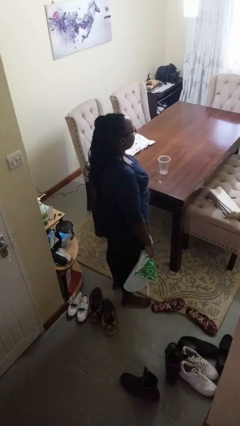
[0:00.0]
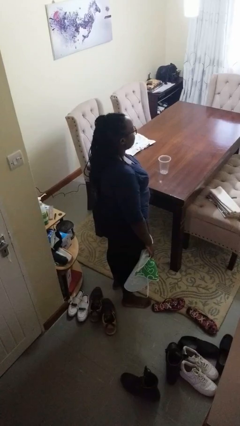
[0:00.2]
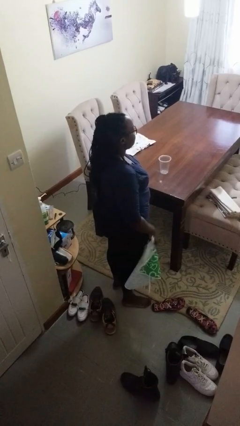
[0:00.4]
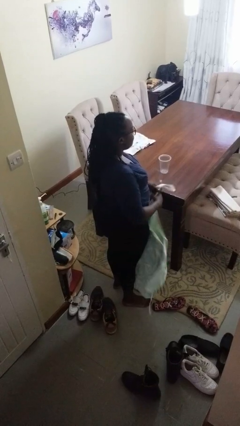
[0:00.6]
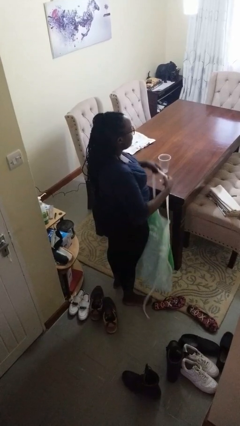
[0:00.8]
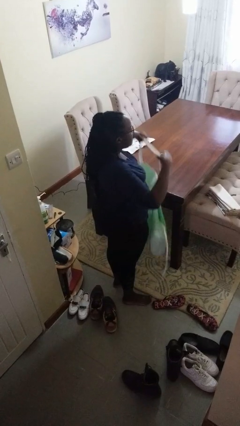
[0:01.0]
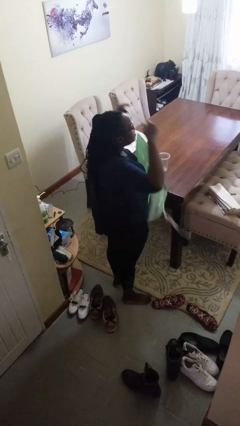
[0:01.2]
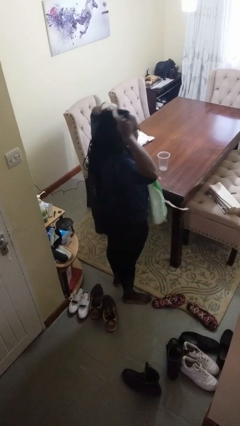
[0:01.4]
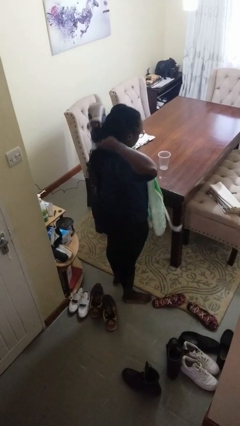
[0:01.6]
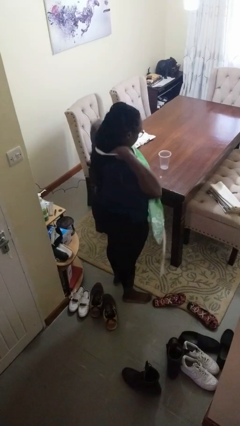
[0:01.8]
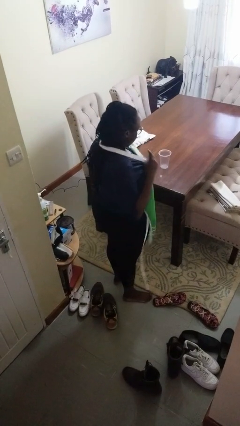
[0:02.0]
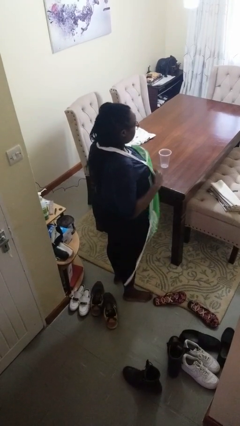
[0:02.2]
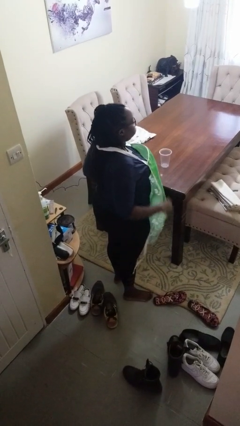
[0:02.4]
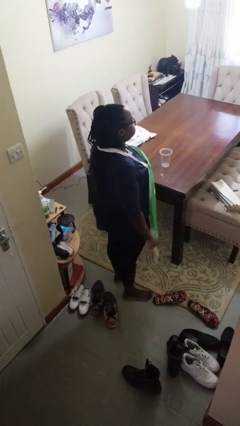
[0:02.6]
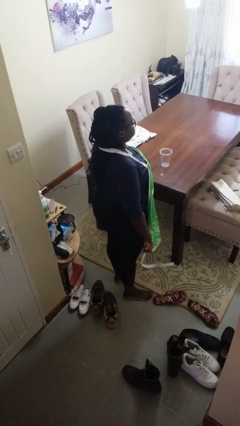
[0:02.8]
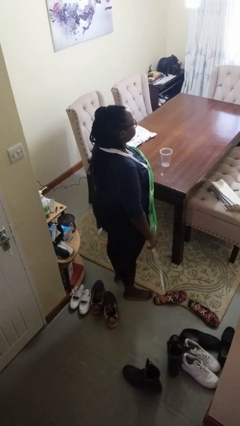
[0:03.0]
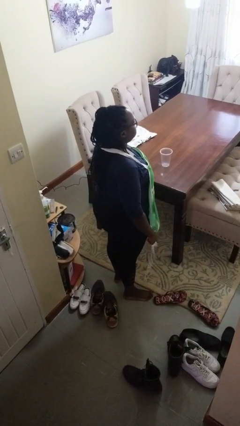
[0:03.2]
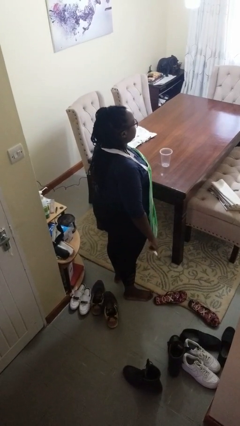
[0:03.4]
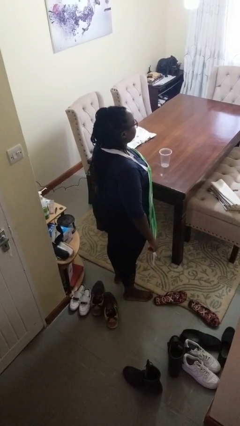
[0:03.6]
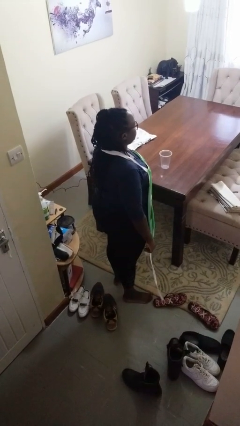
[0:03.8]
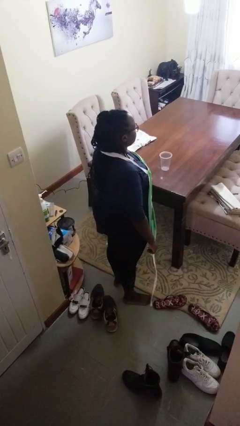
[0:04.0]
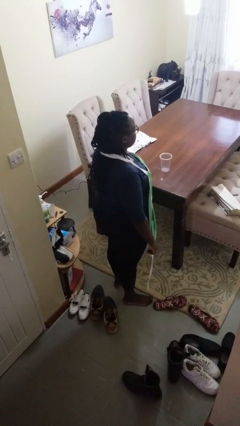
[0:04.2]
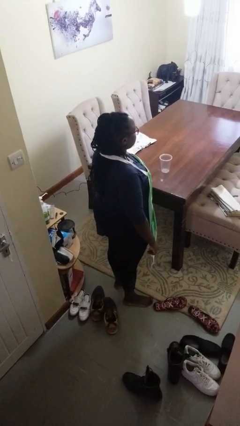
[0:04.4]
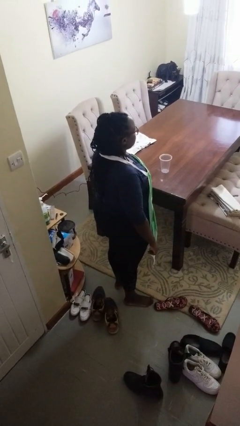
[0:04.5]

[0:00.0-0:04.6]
person puts on apron

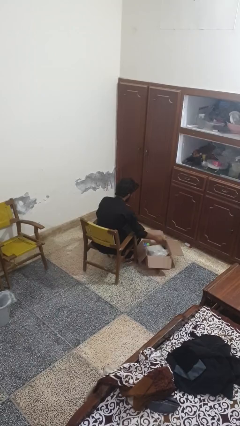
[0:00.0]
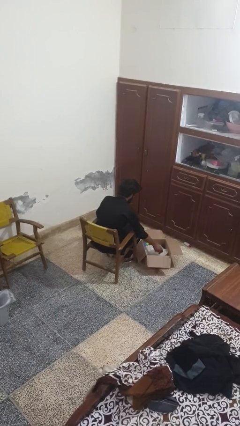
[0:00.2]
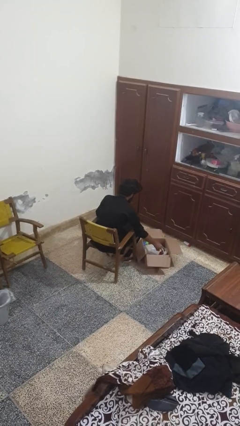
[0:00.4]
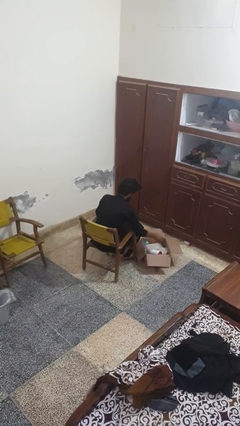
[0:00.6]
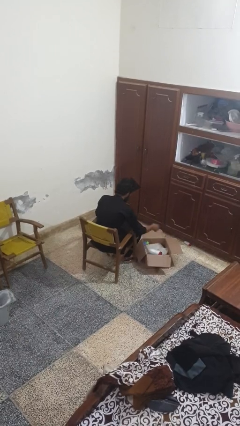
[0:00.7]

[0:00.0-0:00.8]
person puts object into box

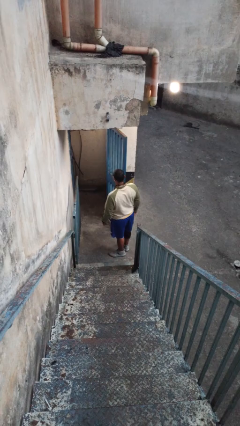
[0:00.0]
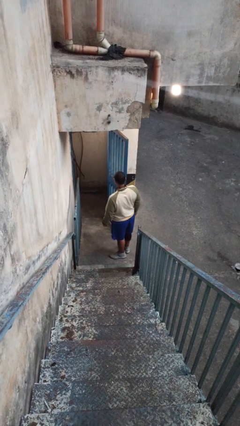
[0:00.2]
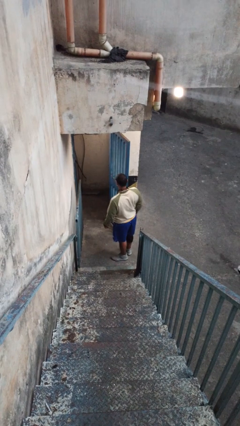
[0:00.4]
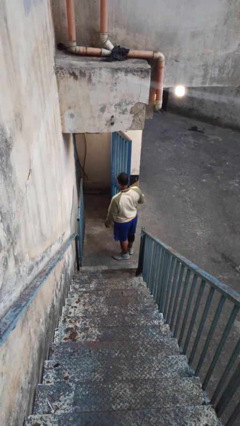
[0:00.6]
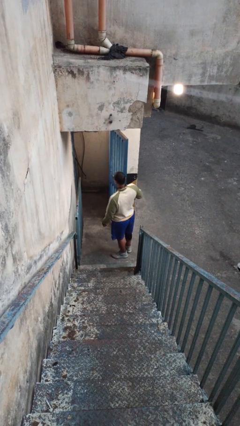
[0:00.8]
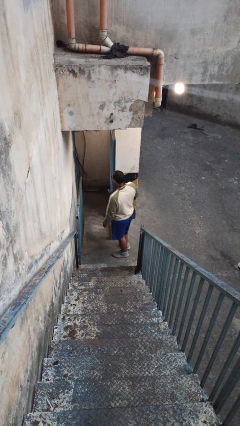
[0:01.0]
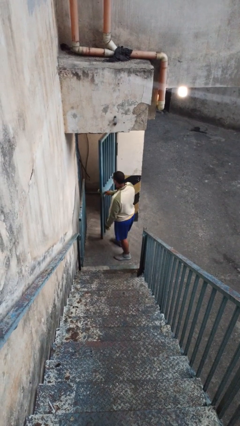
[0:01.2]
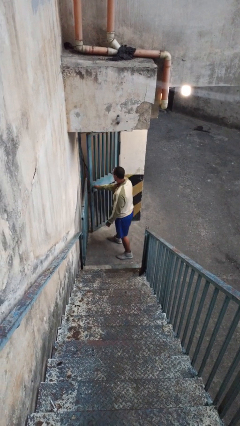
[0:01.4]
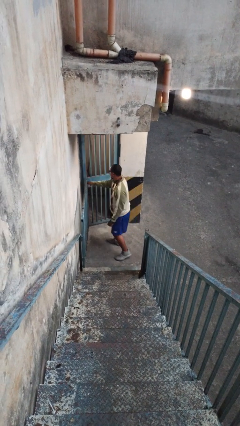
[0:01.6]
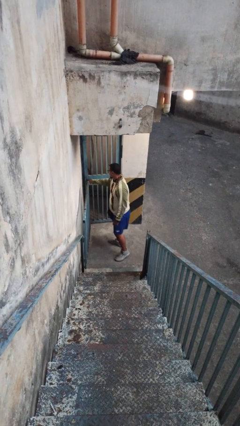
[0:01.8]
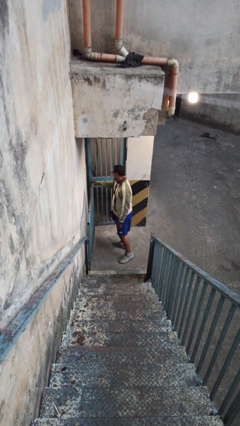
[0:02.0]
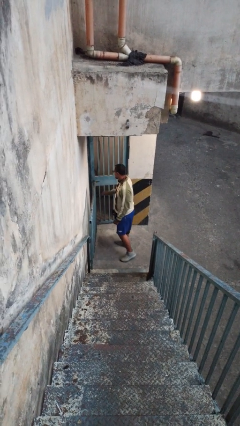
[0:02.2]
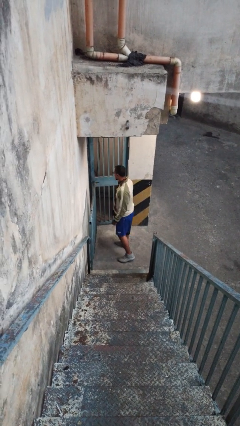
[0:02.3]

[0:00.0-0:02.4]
person closes facility door

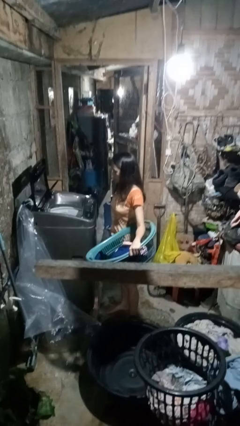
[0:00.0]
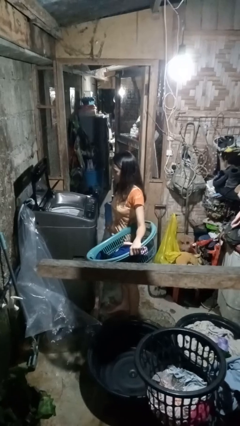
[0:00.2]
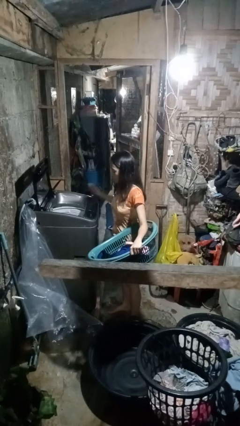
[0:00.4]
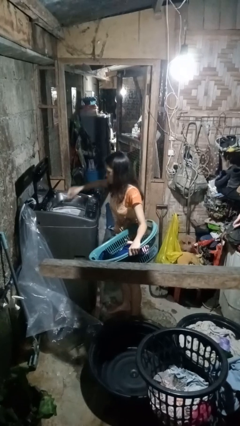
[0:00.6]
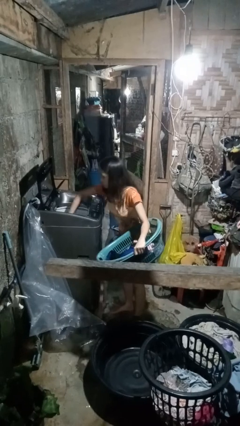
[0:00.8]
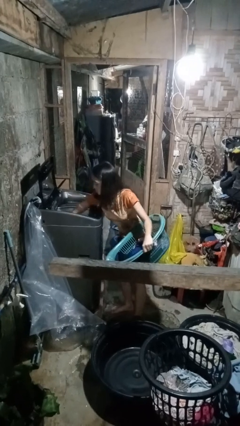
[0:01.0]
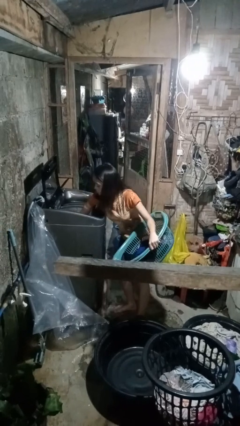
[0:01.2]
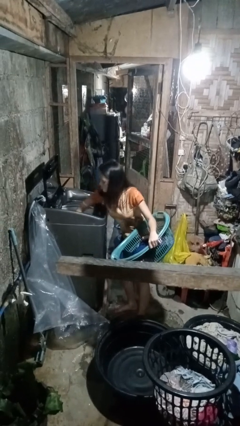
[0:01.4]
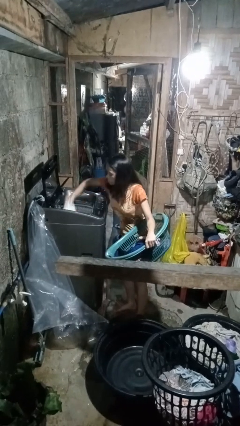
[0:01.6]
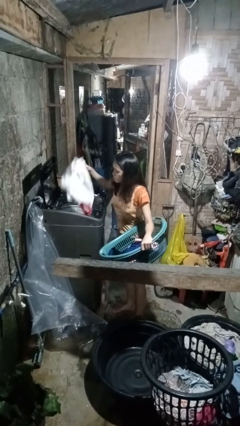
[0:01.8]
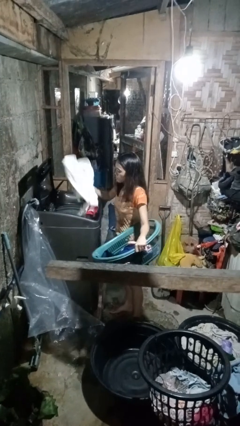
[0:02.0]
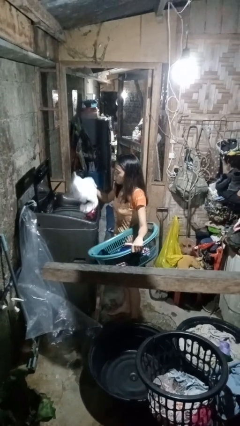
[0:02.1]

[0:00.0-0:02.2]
person loads clotheswasher

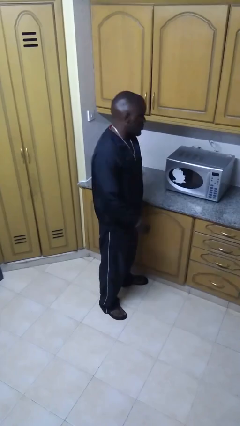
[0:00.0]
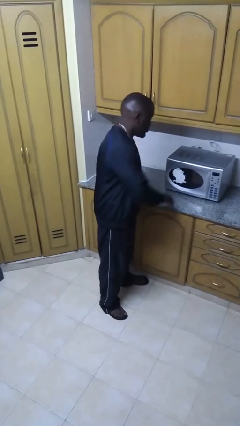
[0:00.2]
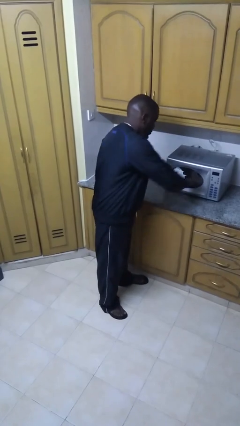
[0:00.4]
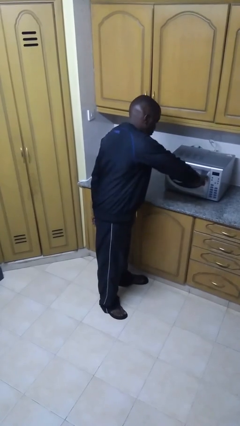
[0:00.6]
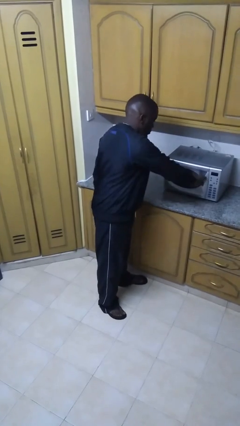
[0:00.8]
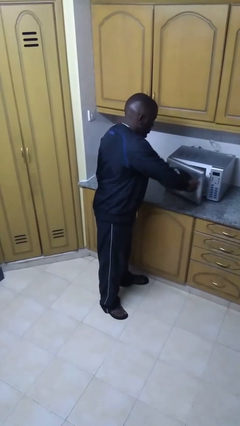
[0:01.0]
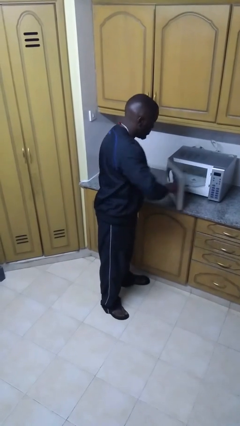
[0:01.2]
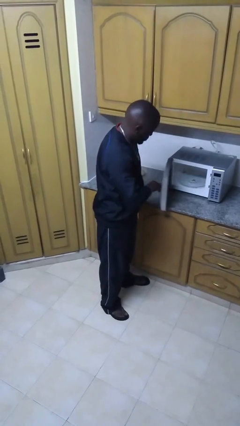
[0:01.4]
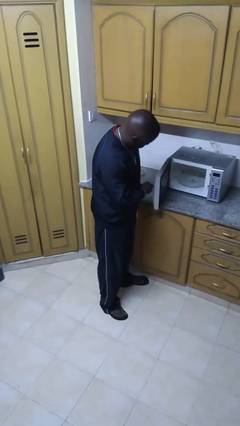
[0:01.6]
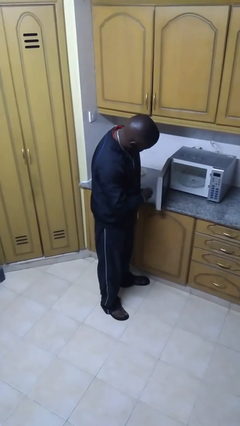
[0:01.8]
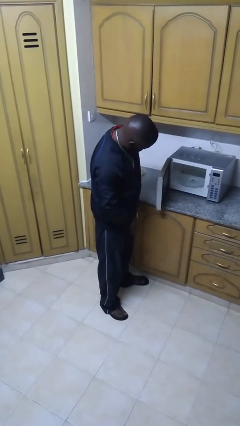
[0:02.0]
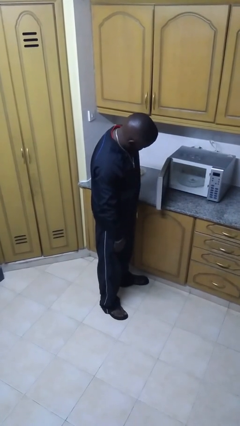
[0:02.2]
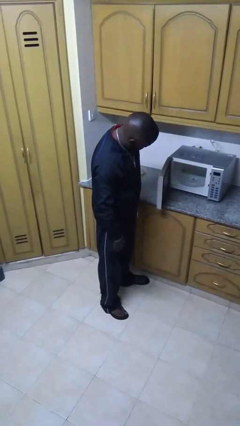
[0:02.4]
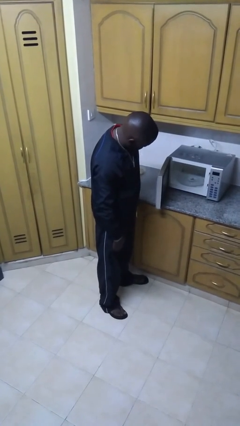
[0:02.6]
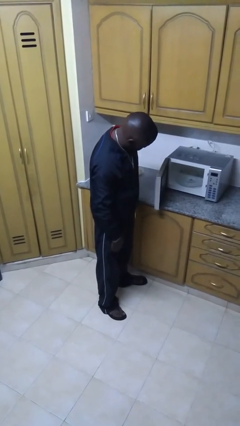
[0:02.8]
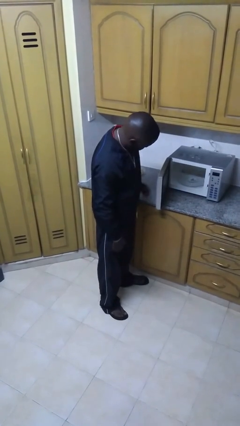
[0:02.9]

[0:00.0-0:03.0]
person opens microwave

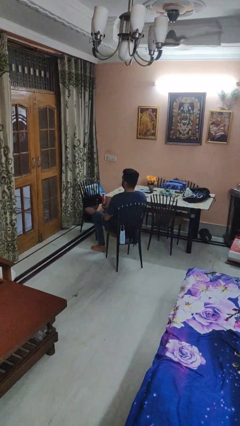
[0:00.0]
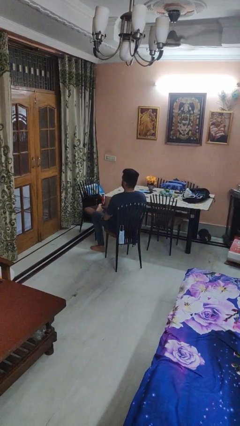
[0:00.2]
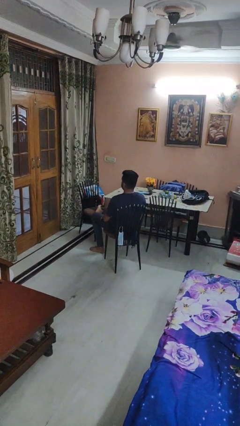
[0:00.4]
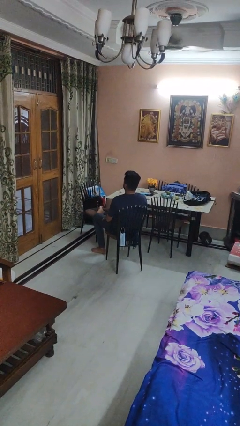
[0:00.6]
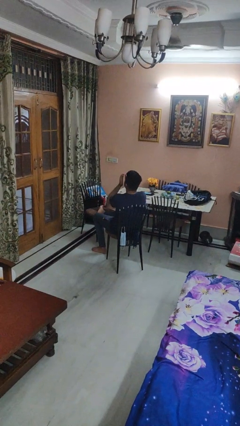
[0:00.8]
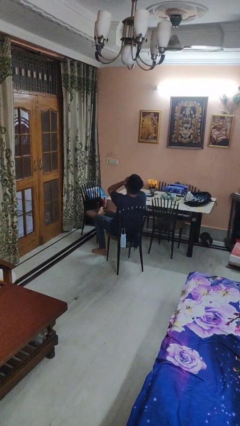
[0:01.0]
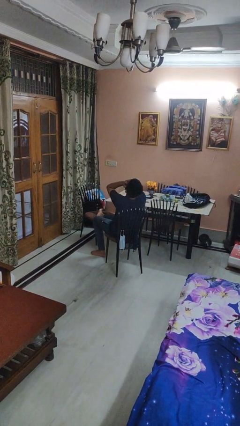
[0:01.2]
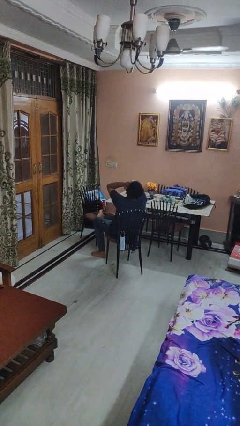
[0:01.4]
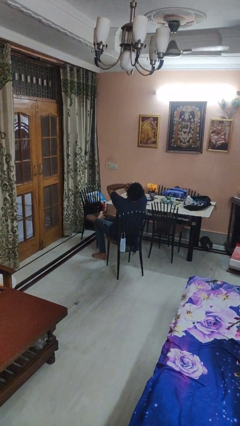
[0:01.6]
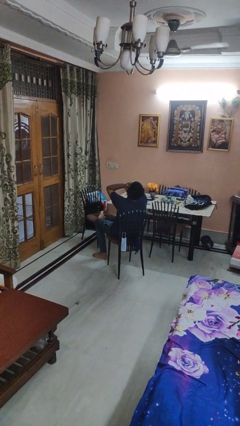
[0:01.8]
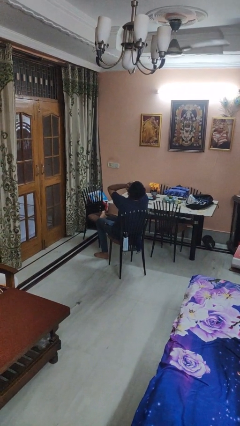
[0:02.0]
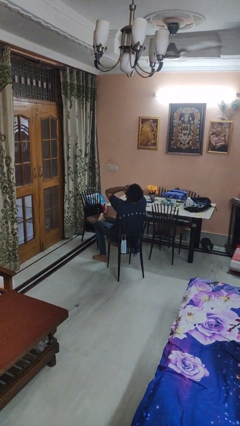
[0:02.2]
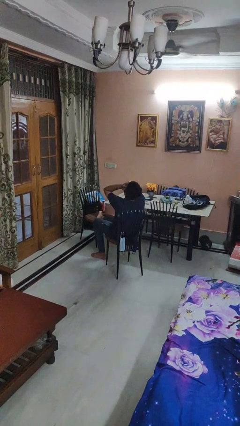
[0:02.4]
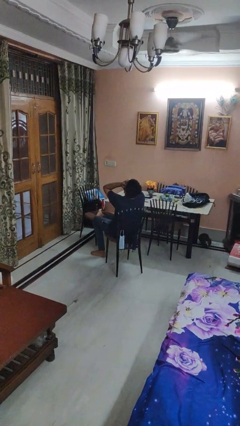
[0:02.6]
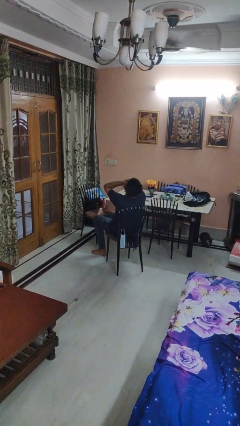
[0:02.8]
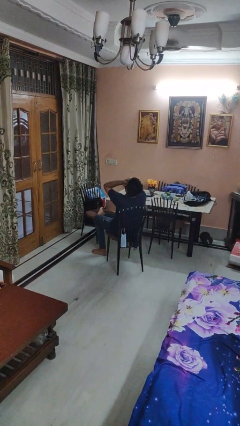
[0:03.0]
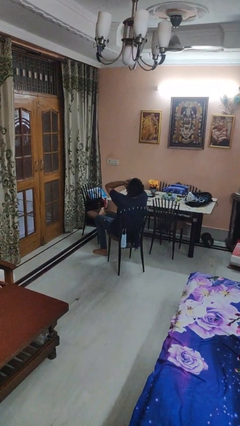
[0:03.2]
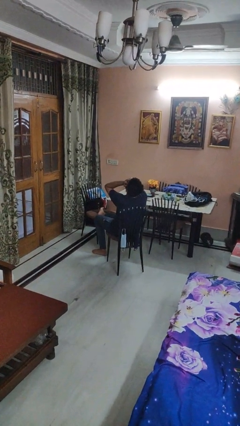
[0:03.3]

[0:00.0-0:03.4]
person covers face with hands

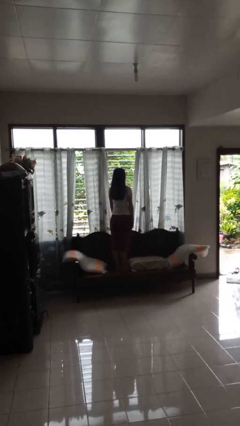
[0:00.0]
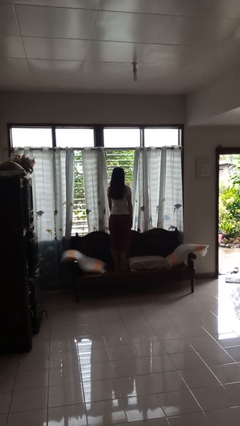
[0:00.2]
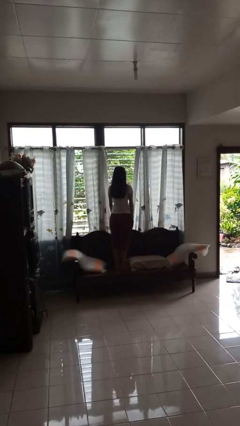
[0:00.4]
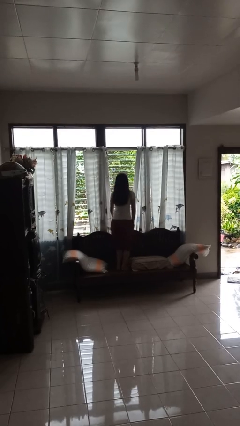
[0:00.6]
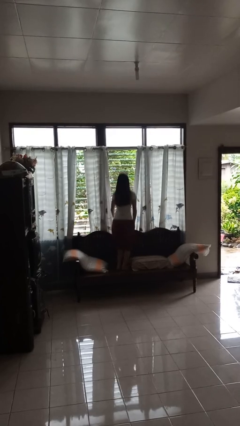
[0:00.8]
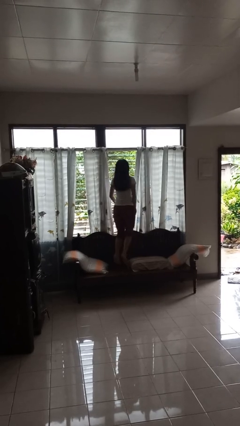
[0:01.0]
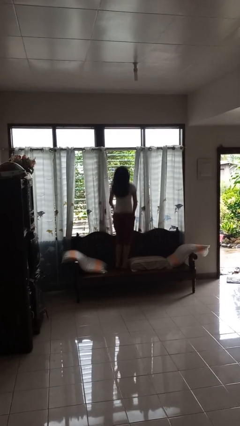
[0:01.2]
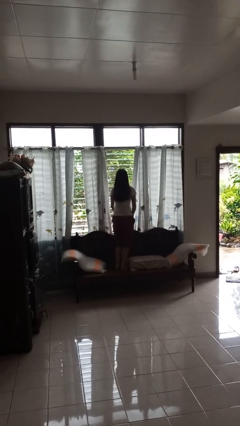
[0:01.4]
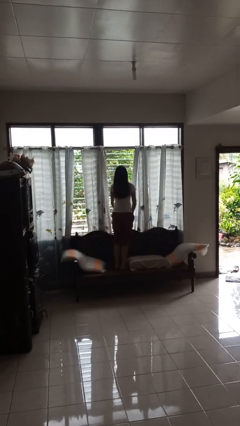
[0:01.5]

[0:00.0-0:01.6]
person jumps on couch
